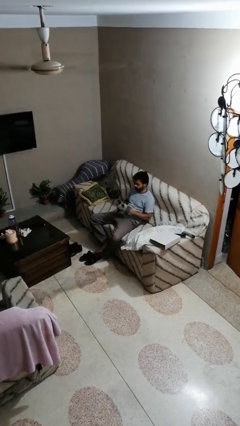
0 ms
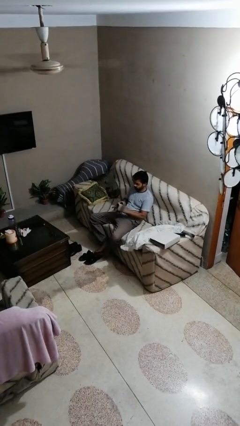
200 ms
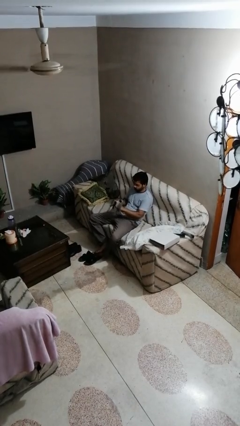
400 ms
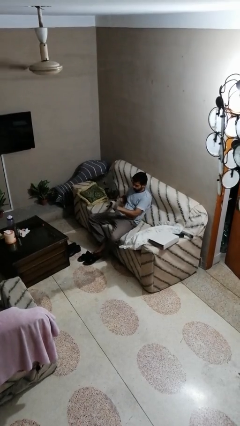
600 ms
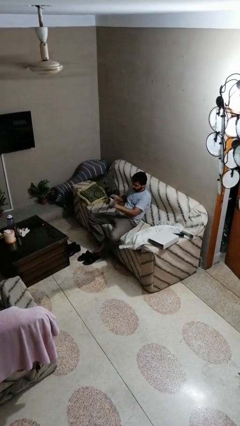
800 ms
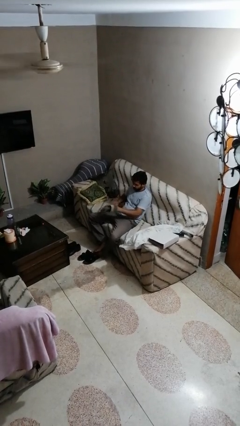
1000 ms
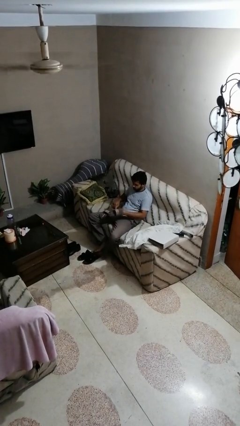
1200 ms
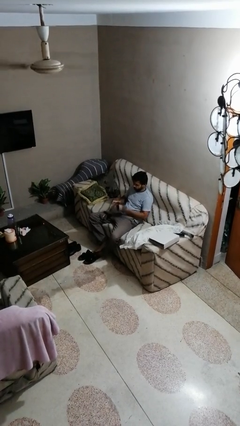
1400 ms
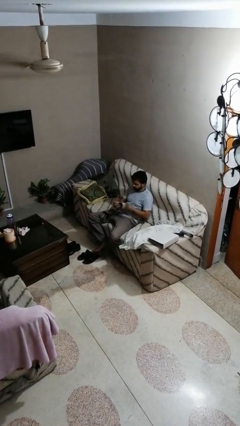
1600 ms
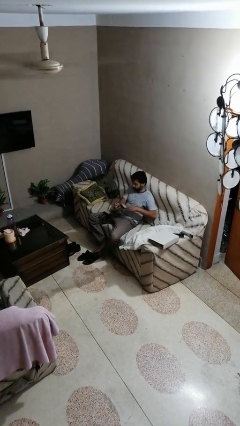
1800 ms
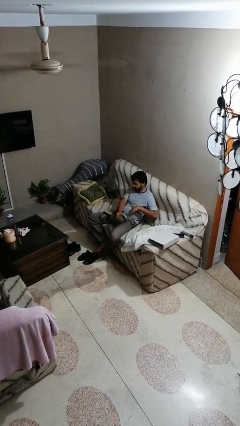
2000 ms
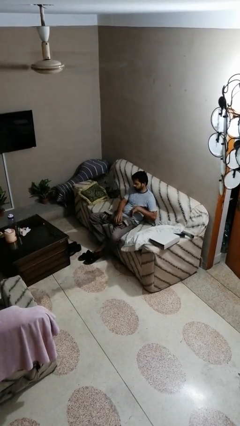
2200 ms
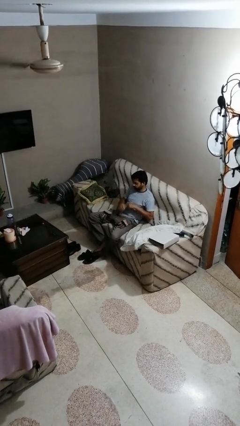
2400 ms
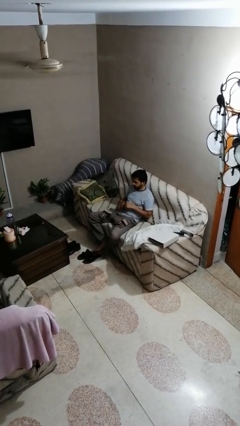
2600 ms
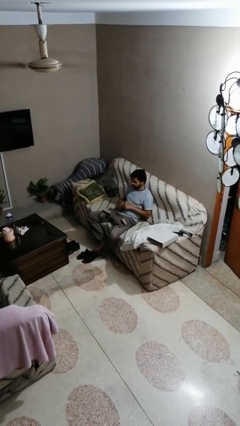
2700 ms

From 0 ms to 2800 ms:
person takes off gloves

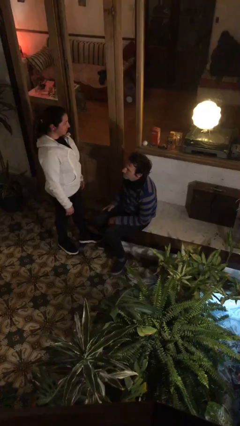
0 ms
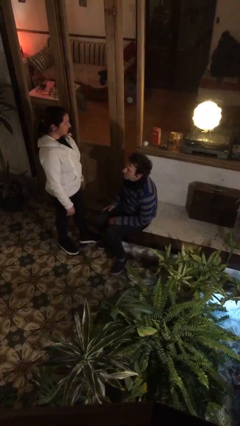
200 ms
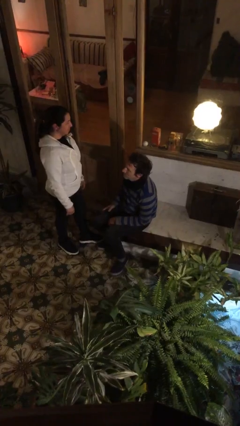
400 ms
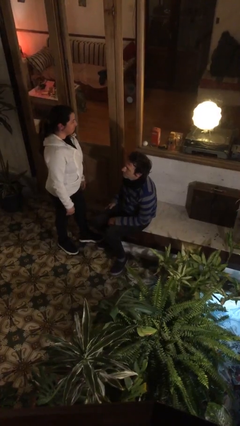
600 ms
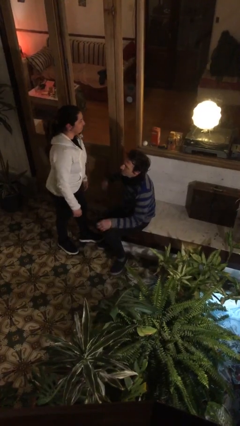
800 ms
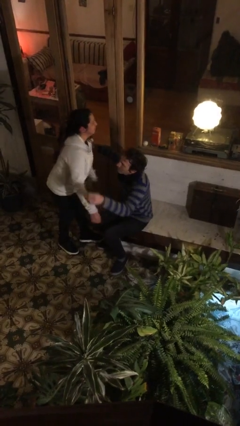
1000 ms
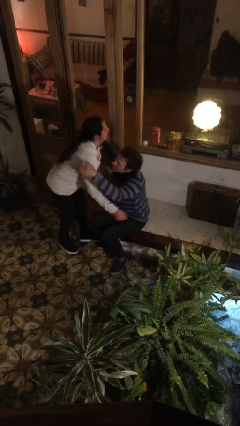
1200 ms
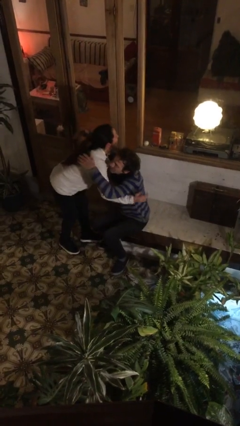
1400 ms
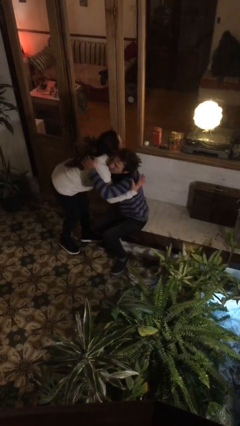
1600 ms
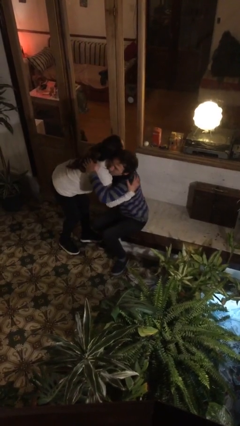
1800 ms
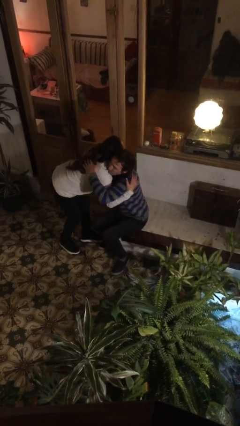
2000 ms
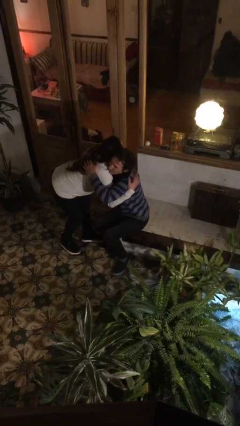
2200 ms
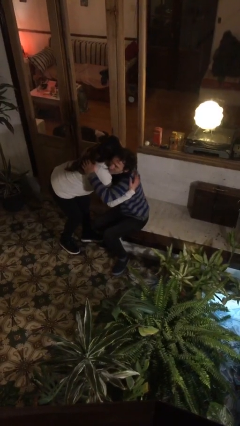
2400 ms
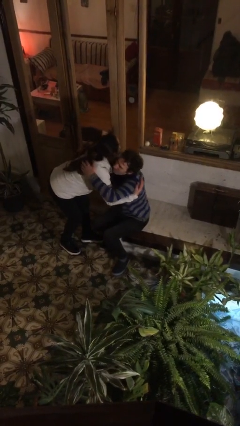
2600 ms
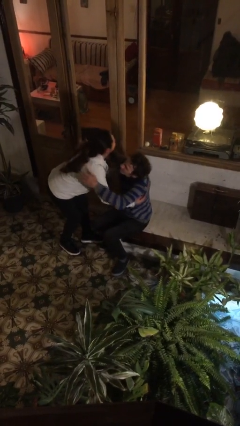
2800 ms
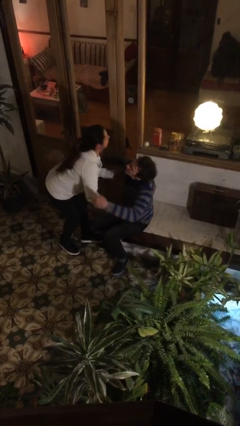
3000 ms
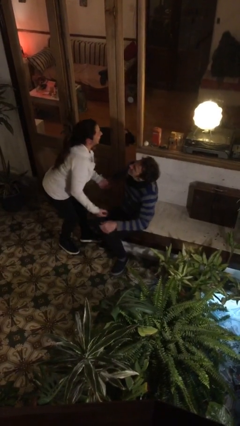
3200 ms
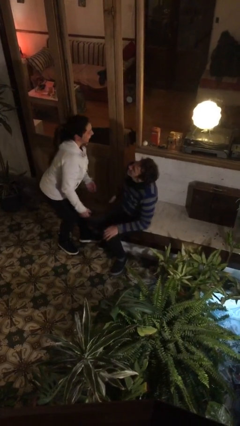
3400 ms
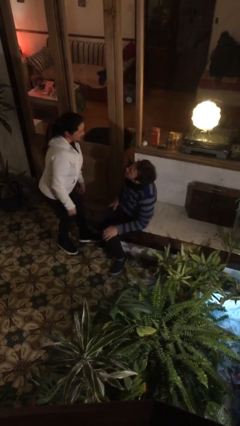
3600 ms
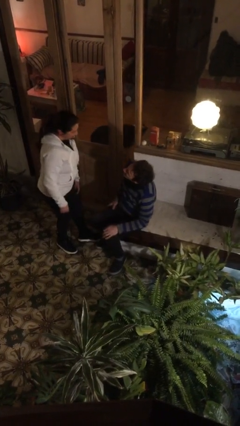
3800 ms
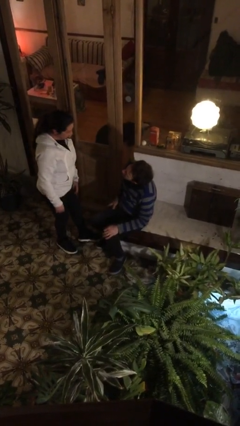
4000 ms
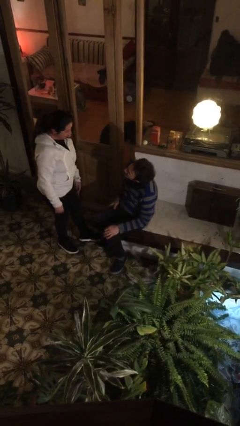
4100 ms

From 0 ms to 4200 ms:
person embraces person

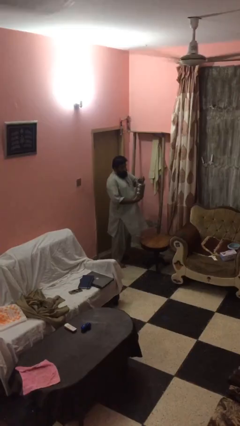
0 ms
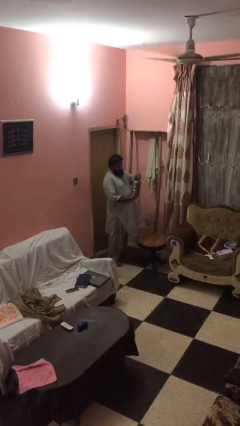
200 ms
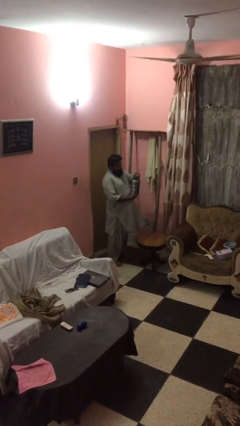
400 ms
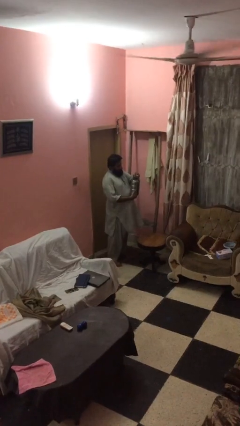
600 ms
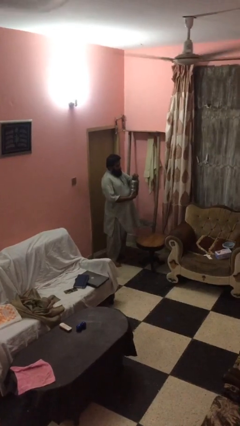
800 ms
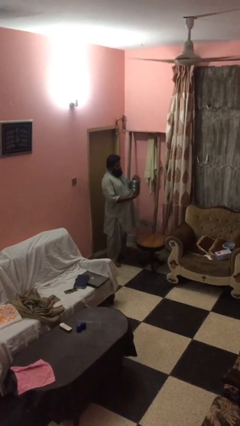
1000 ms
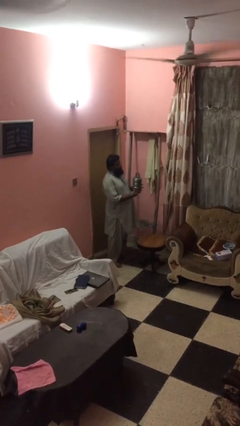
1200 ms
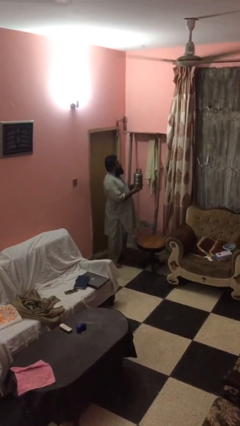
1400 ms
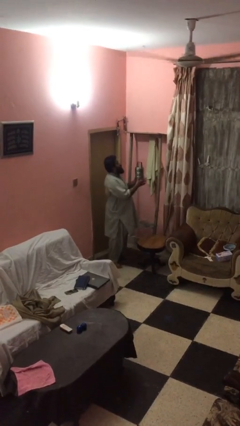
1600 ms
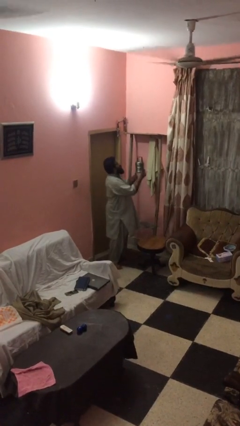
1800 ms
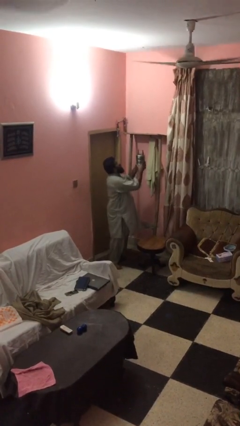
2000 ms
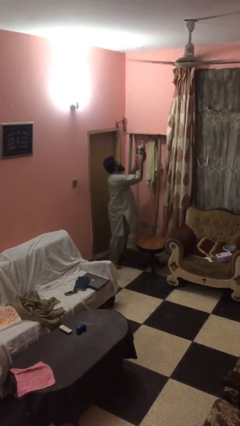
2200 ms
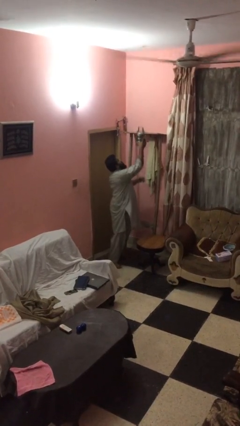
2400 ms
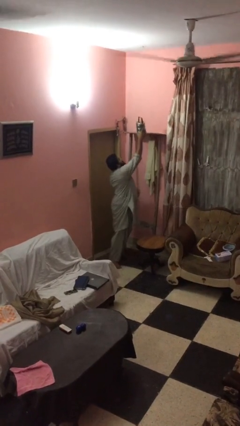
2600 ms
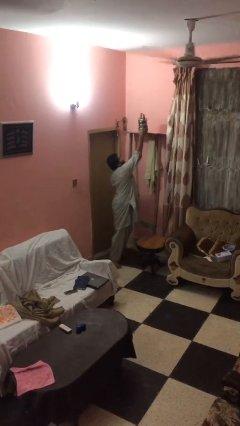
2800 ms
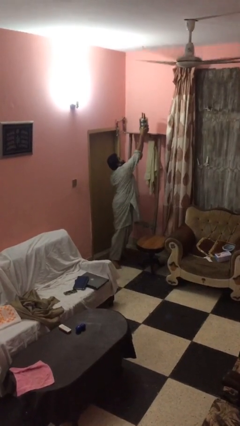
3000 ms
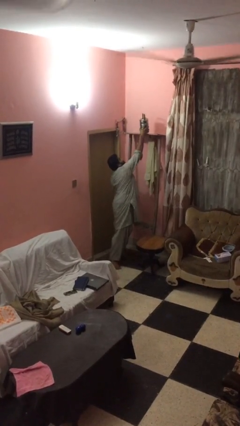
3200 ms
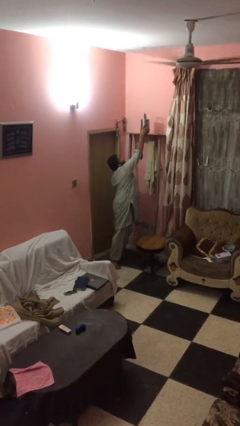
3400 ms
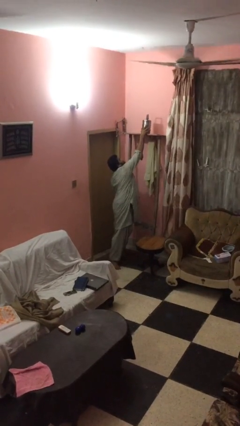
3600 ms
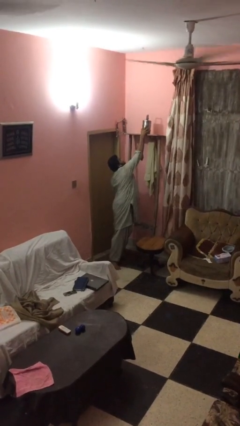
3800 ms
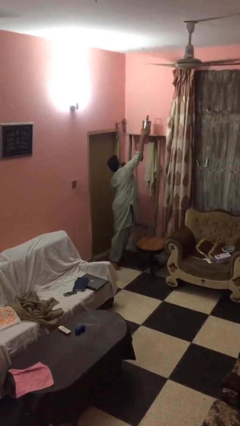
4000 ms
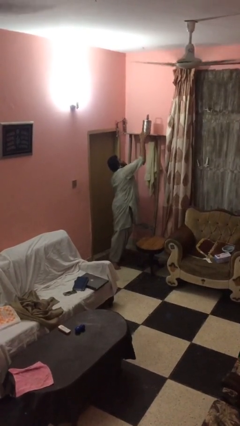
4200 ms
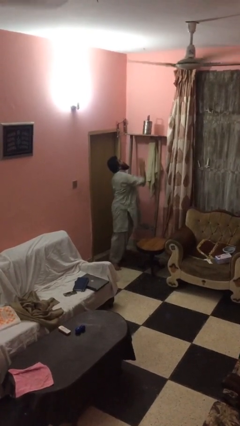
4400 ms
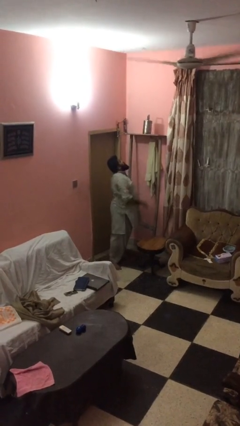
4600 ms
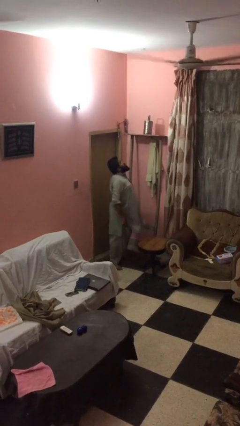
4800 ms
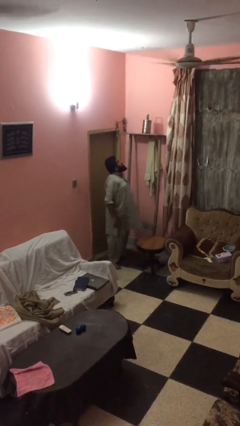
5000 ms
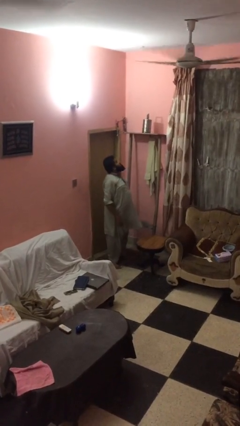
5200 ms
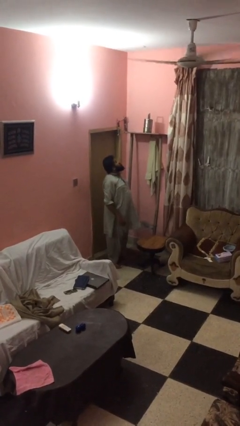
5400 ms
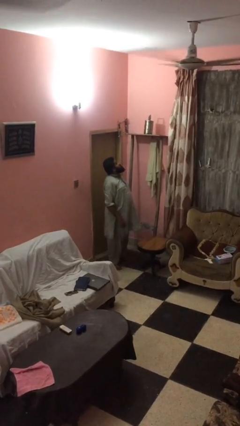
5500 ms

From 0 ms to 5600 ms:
person puts down object on shelf

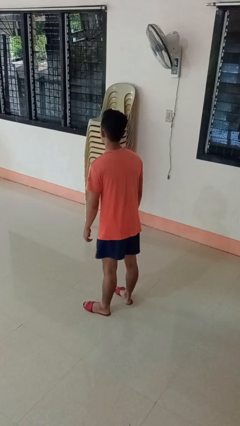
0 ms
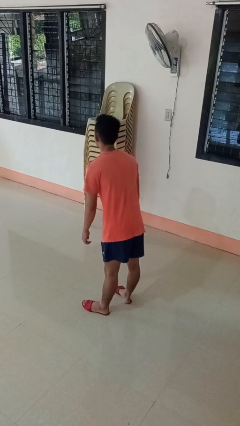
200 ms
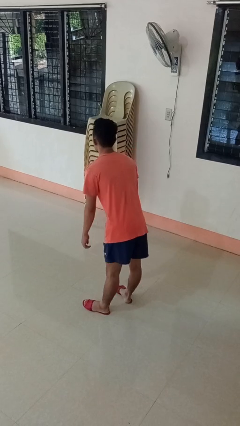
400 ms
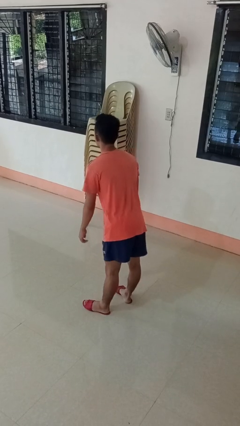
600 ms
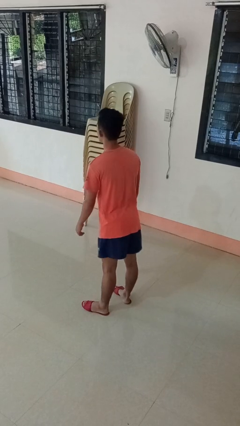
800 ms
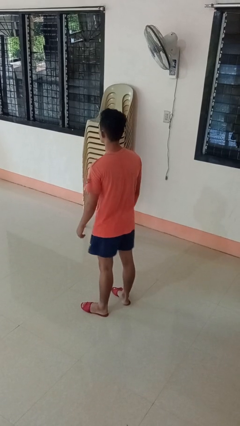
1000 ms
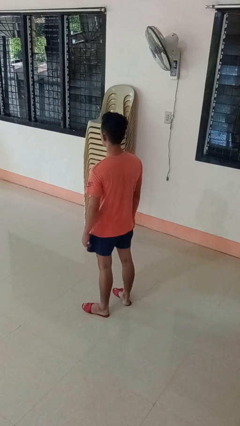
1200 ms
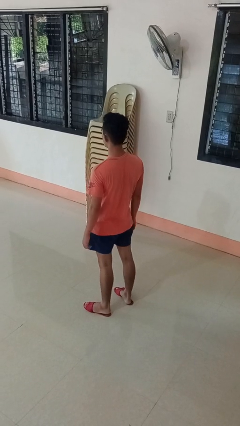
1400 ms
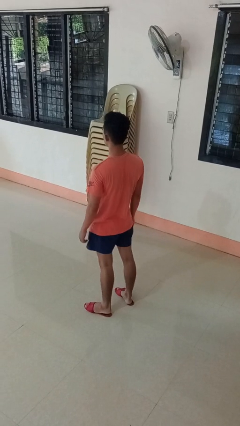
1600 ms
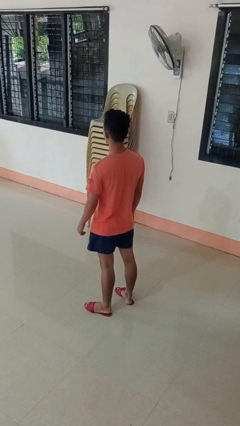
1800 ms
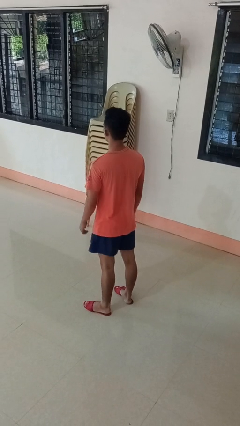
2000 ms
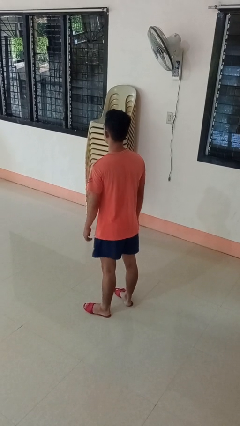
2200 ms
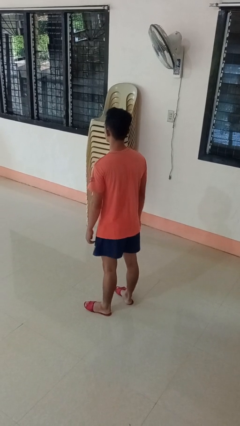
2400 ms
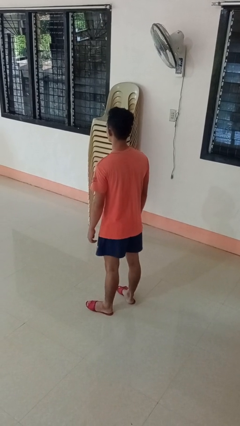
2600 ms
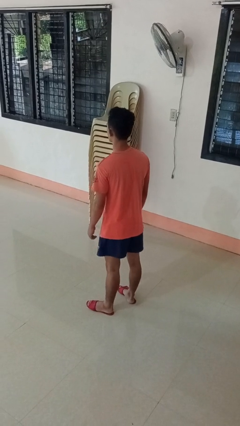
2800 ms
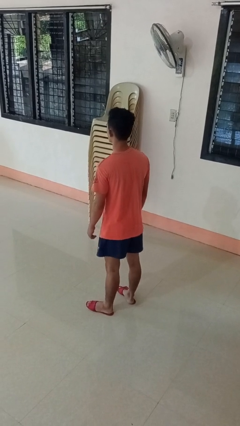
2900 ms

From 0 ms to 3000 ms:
person wiggles hips

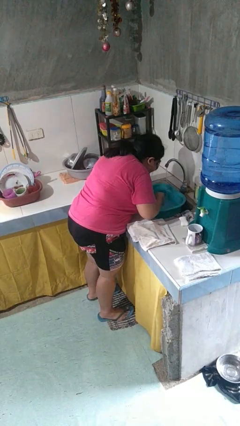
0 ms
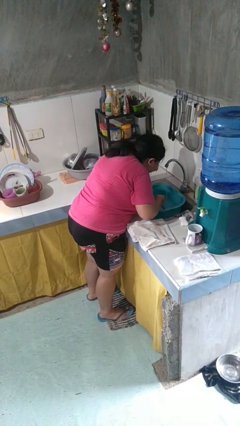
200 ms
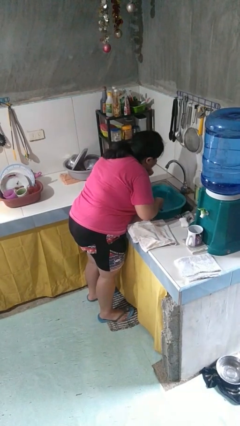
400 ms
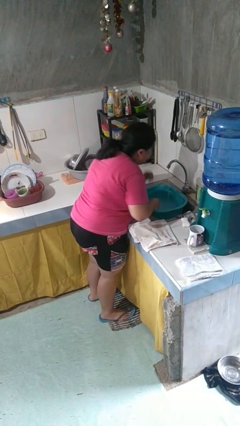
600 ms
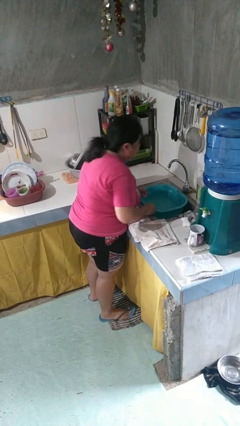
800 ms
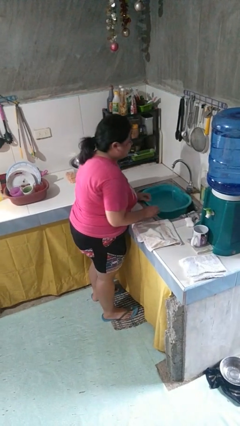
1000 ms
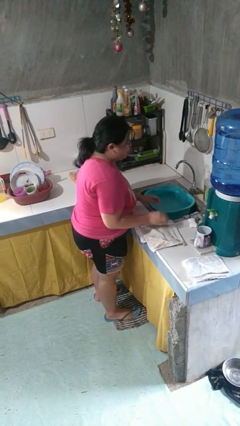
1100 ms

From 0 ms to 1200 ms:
person dries face with towel

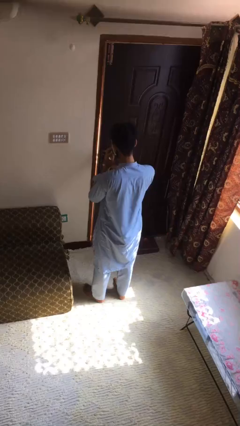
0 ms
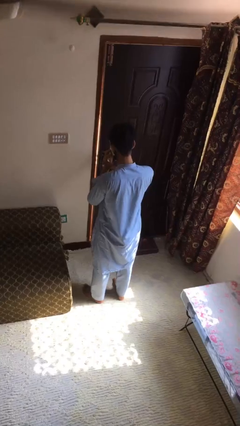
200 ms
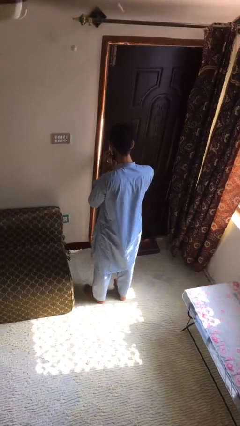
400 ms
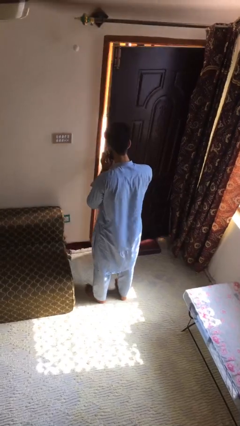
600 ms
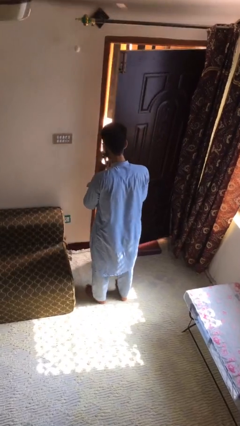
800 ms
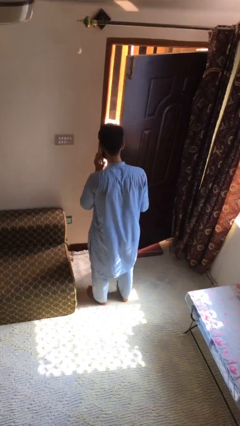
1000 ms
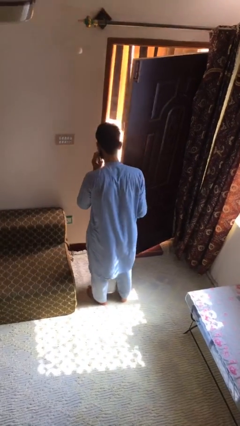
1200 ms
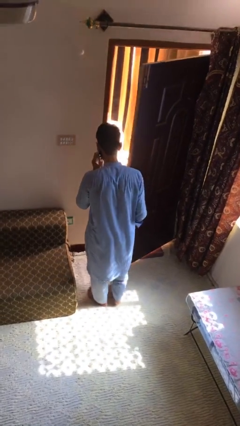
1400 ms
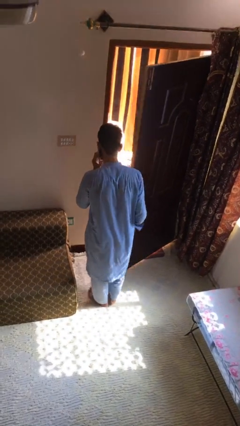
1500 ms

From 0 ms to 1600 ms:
person opens facility door
